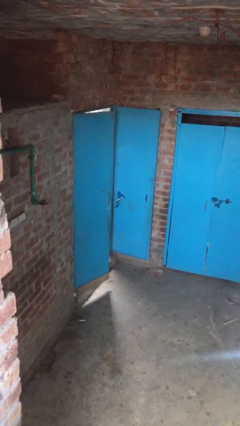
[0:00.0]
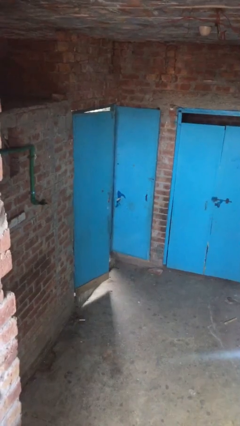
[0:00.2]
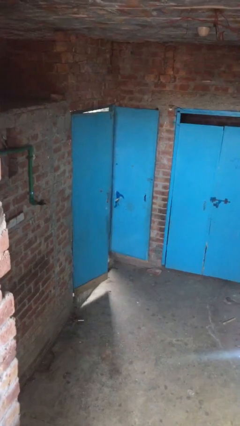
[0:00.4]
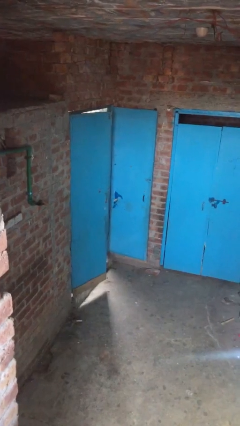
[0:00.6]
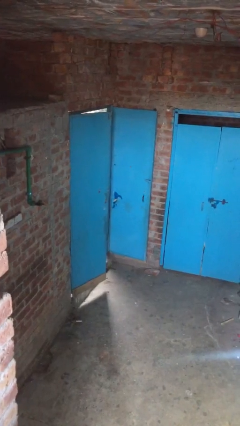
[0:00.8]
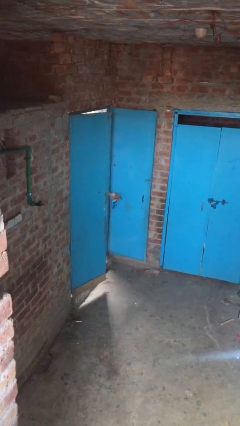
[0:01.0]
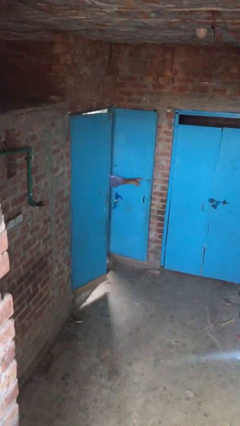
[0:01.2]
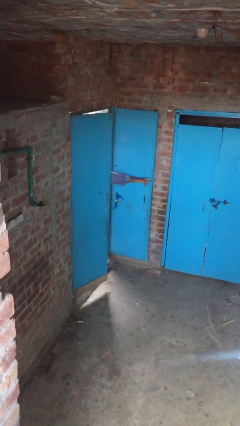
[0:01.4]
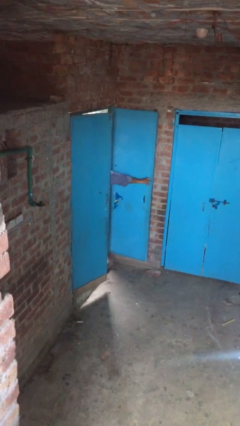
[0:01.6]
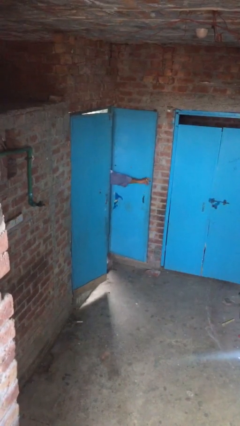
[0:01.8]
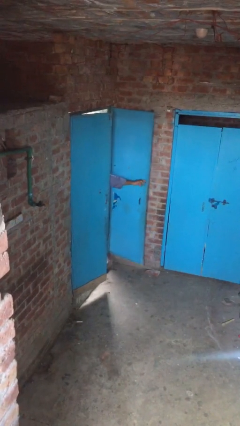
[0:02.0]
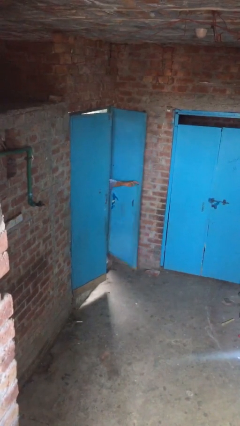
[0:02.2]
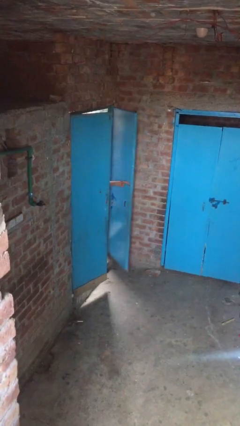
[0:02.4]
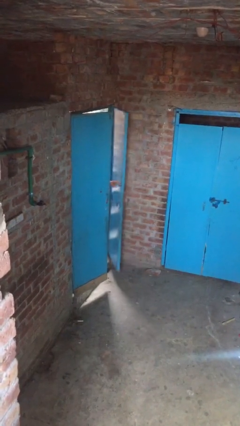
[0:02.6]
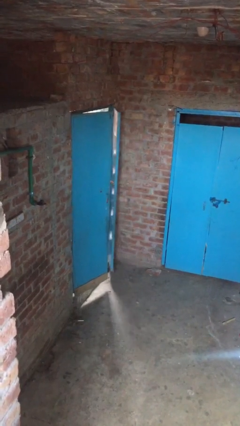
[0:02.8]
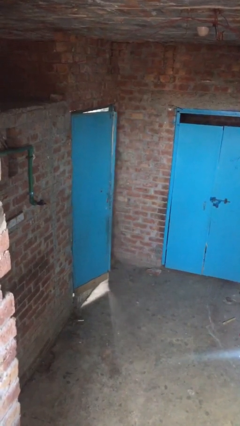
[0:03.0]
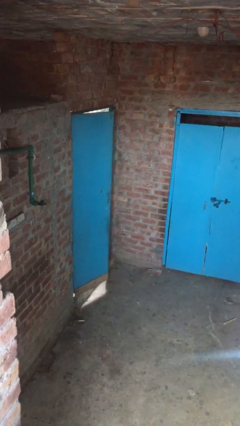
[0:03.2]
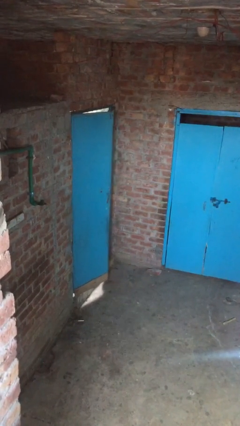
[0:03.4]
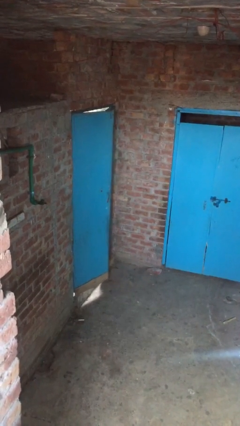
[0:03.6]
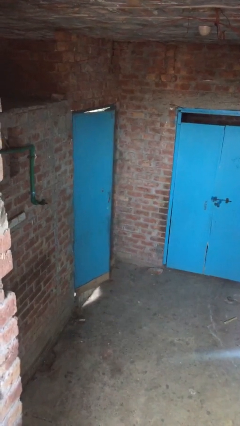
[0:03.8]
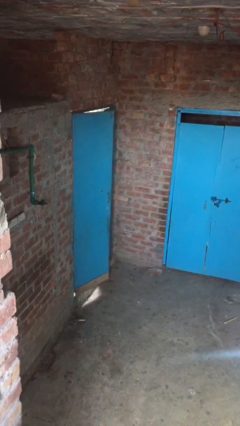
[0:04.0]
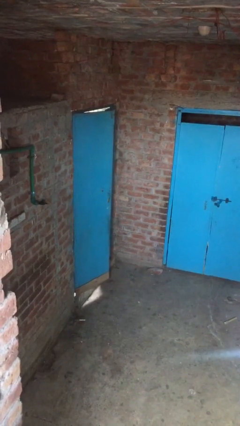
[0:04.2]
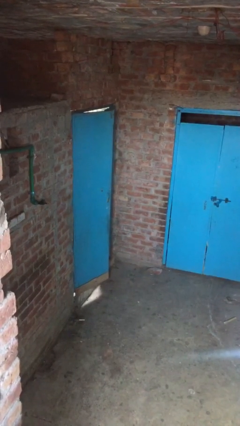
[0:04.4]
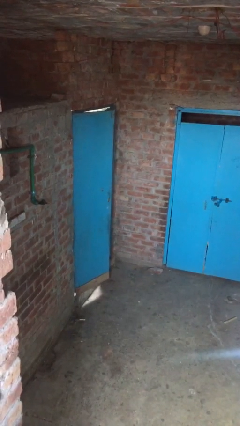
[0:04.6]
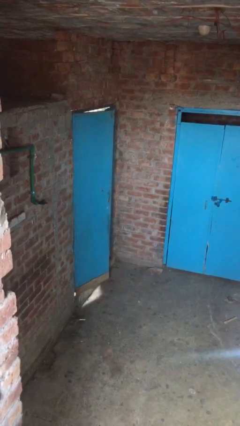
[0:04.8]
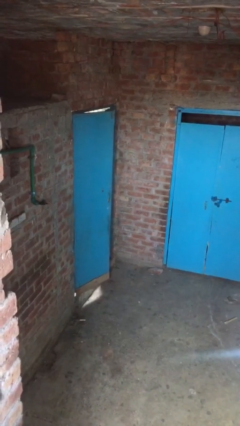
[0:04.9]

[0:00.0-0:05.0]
person closes facility door

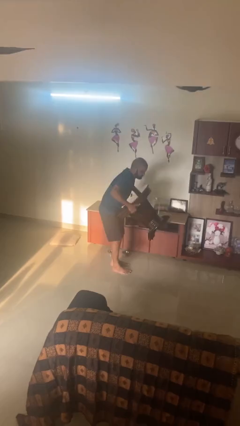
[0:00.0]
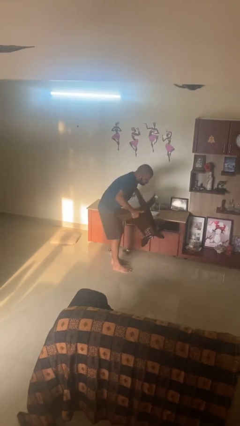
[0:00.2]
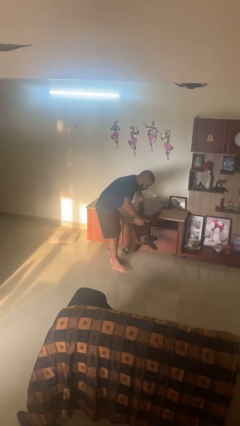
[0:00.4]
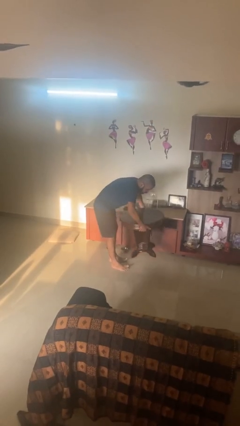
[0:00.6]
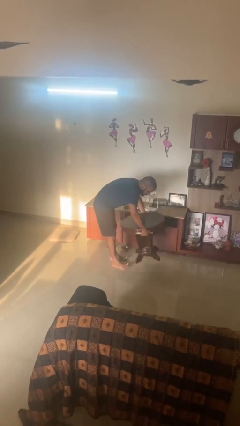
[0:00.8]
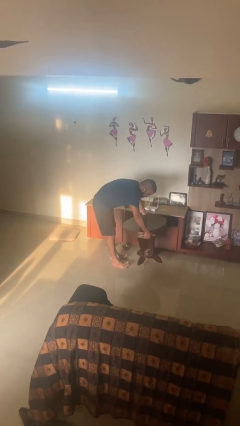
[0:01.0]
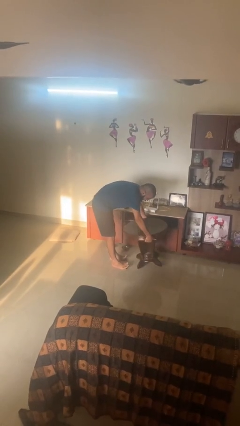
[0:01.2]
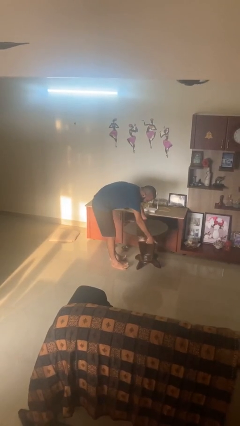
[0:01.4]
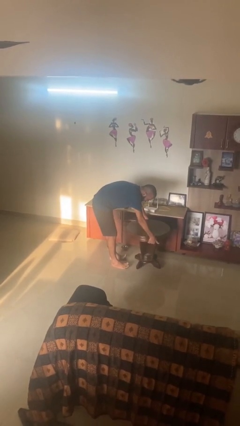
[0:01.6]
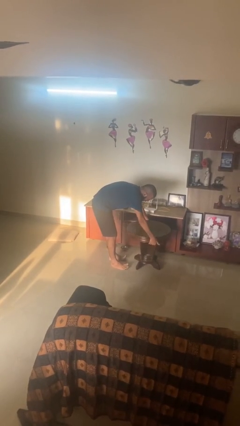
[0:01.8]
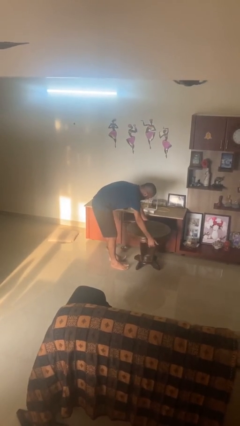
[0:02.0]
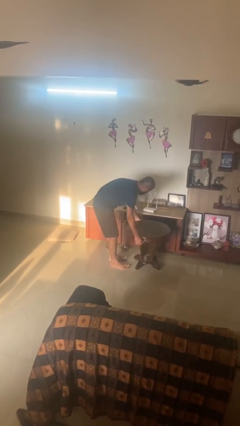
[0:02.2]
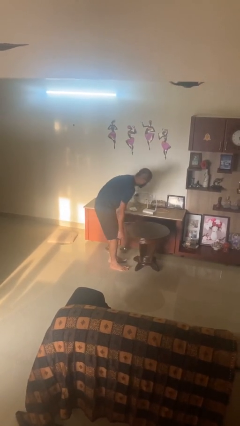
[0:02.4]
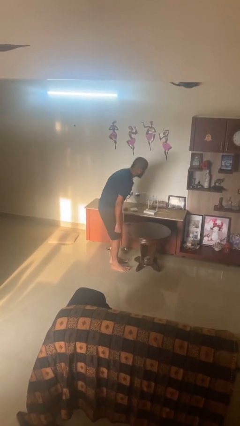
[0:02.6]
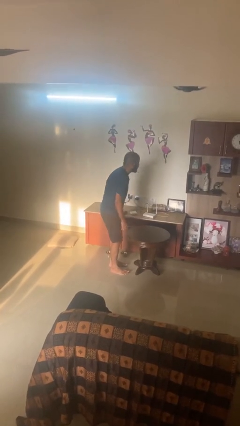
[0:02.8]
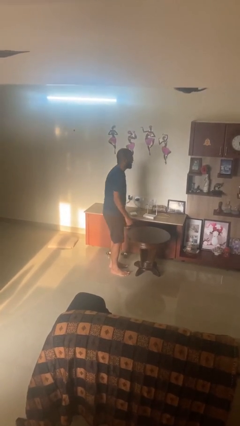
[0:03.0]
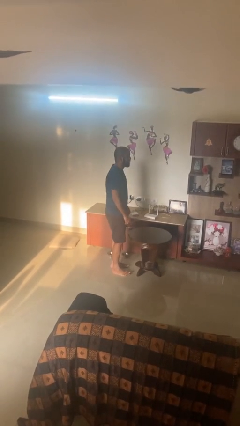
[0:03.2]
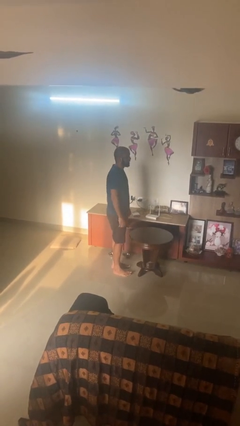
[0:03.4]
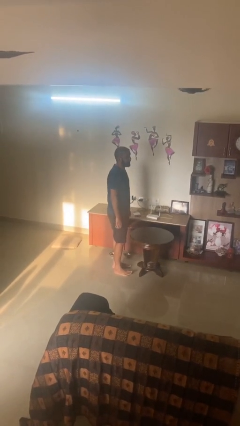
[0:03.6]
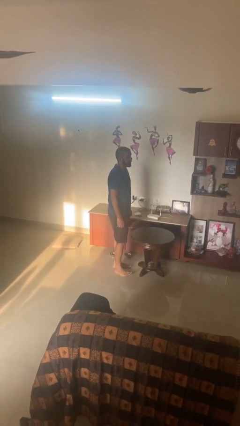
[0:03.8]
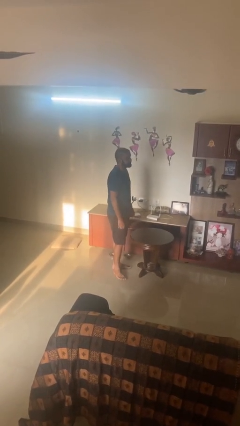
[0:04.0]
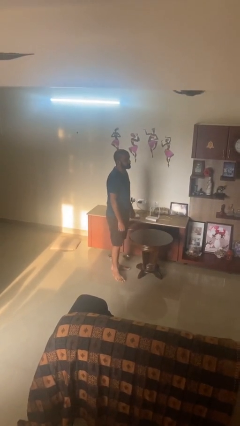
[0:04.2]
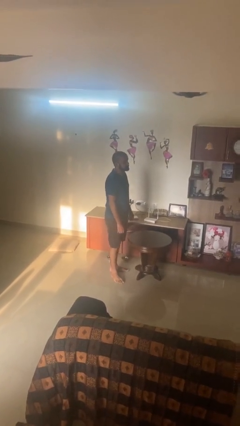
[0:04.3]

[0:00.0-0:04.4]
person puts down object on floor

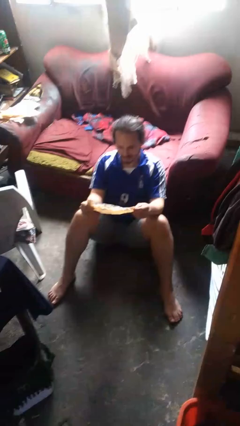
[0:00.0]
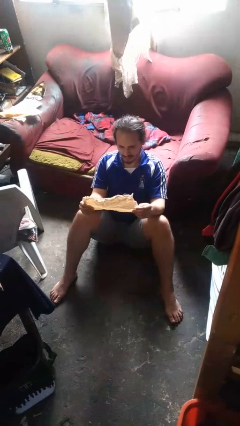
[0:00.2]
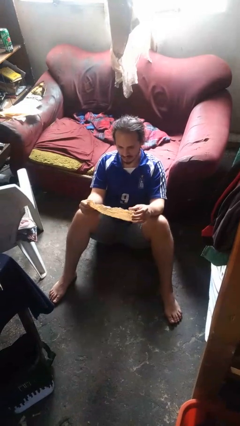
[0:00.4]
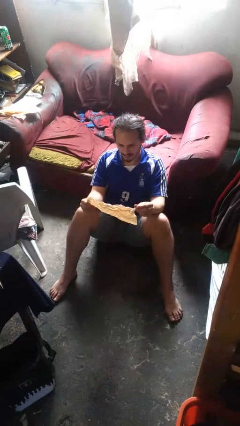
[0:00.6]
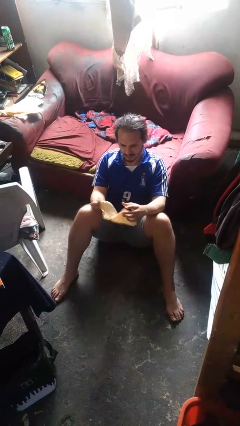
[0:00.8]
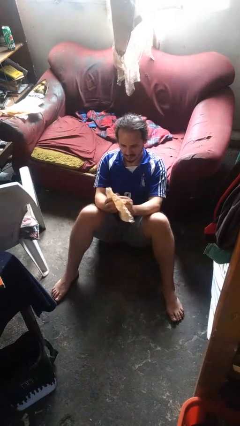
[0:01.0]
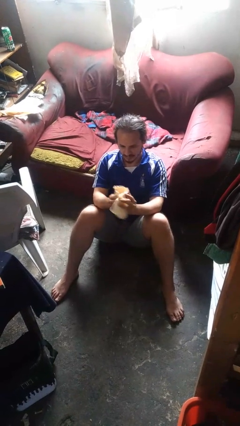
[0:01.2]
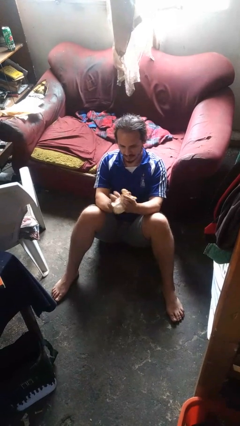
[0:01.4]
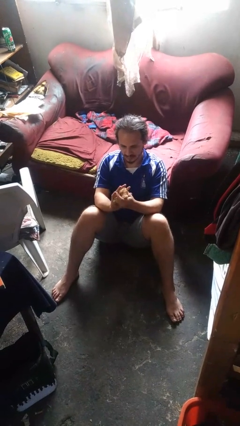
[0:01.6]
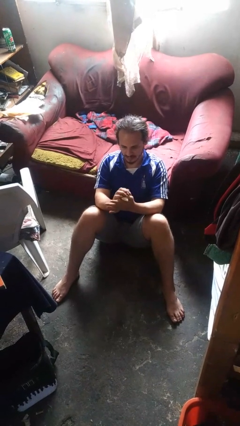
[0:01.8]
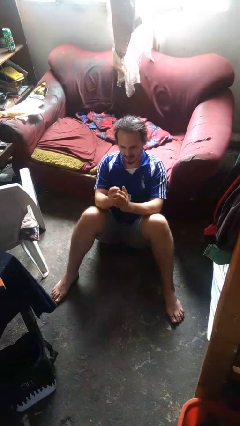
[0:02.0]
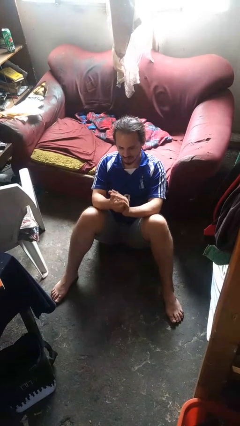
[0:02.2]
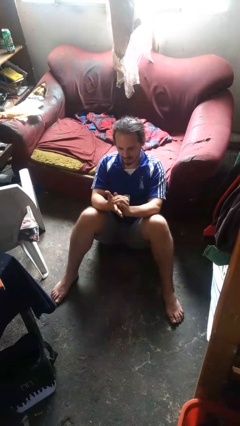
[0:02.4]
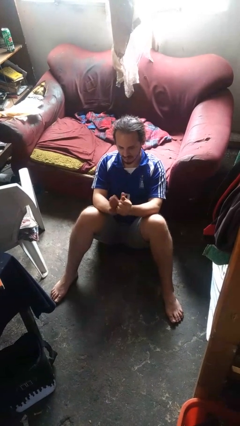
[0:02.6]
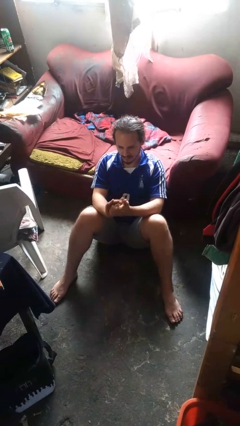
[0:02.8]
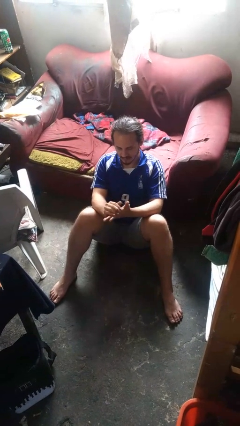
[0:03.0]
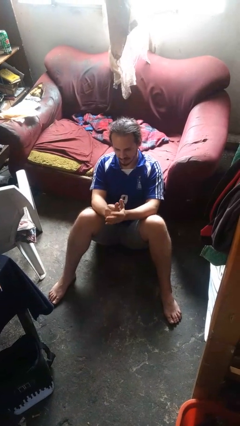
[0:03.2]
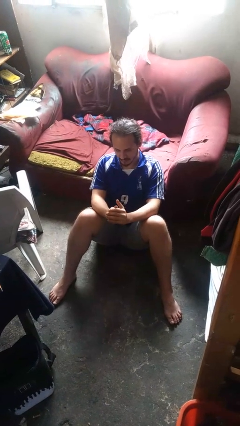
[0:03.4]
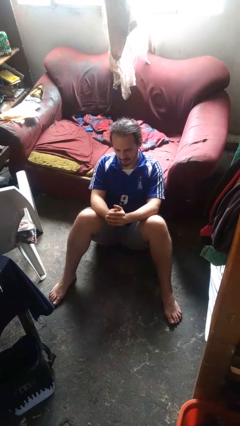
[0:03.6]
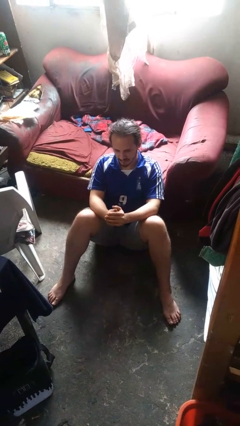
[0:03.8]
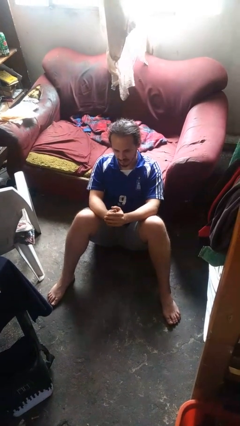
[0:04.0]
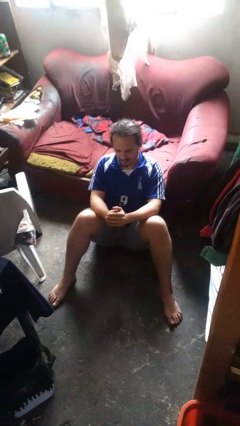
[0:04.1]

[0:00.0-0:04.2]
person crumples paper

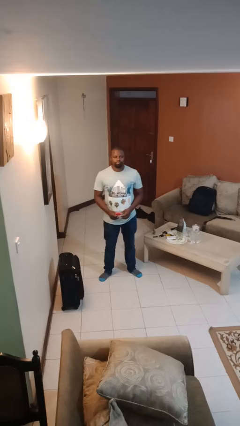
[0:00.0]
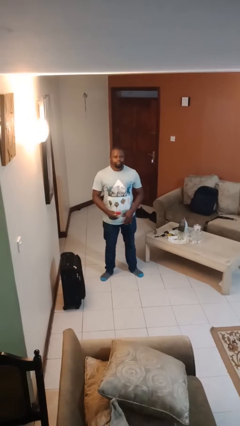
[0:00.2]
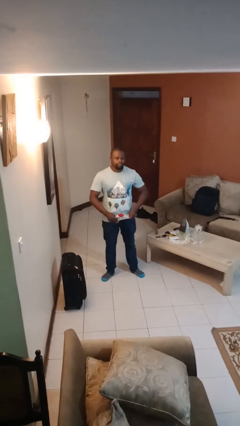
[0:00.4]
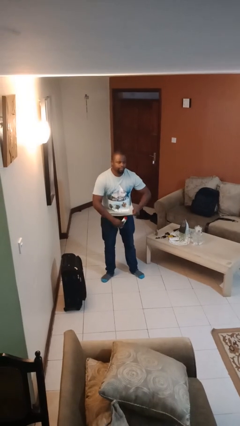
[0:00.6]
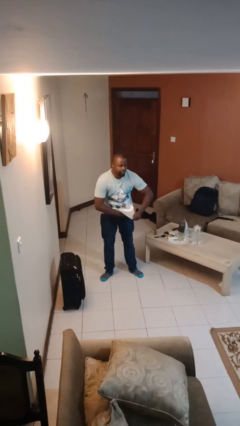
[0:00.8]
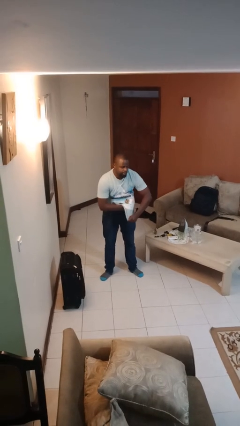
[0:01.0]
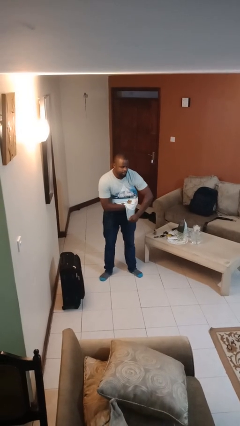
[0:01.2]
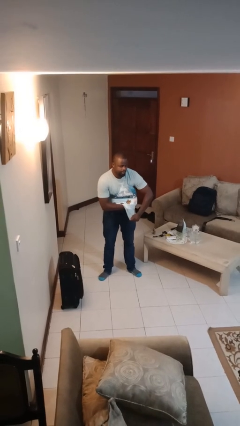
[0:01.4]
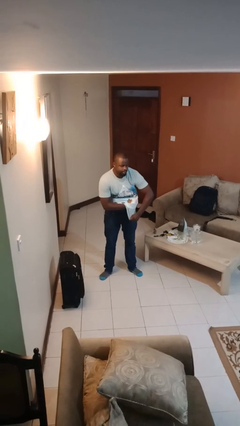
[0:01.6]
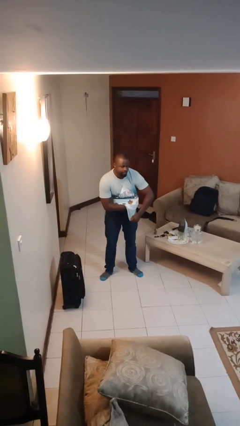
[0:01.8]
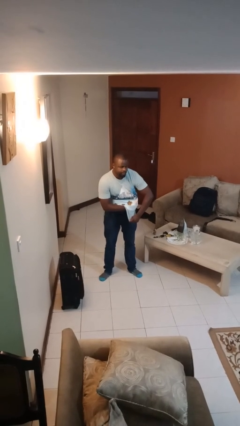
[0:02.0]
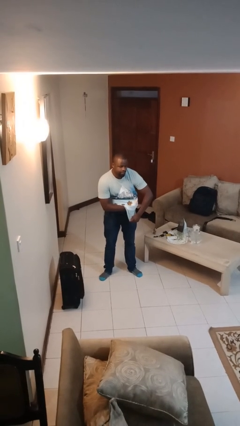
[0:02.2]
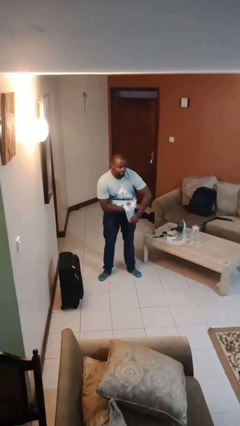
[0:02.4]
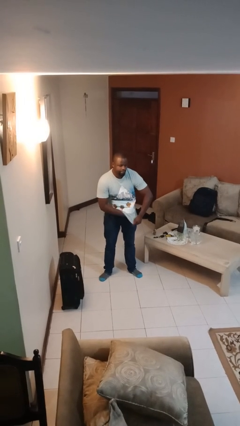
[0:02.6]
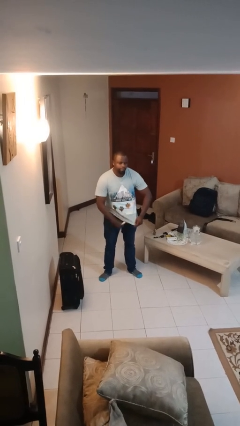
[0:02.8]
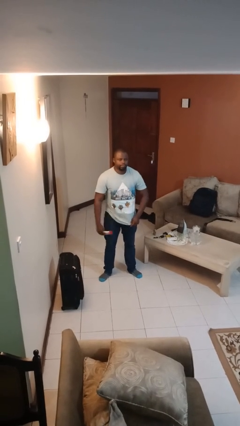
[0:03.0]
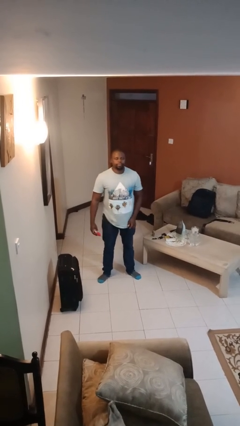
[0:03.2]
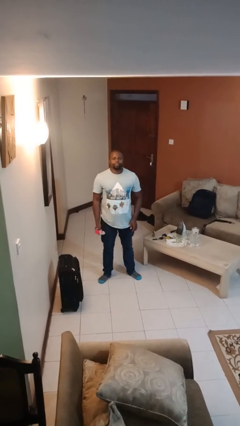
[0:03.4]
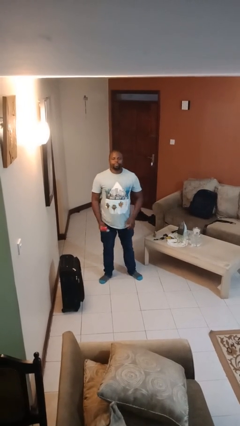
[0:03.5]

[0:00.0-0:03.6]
person applies deodorant

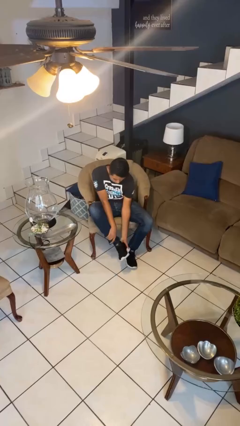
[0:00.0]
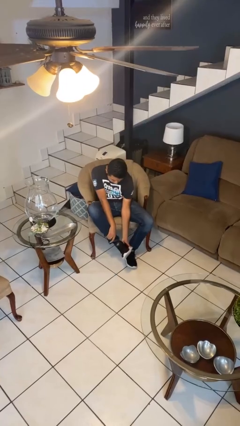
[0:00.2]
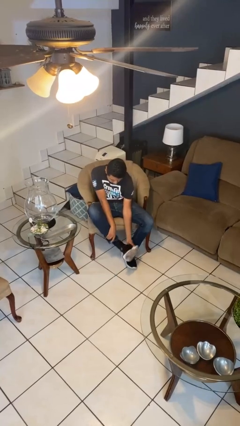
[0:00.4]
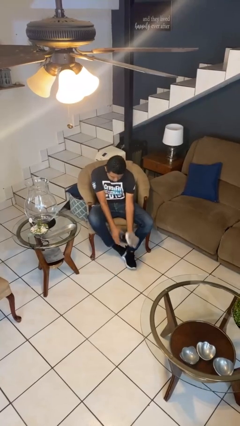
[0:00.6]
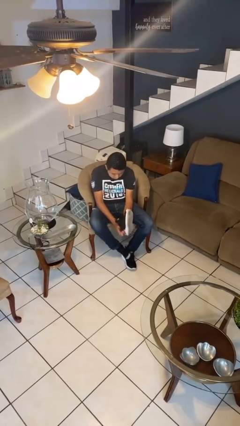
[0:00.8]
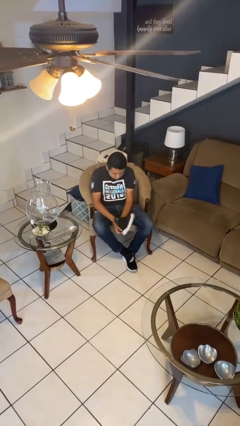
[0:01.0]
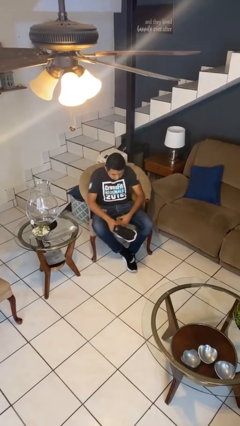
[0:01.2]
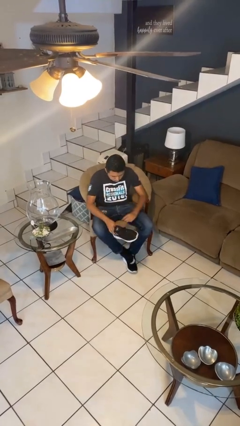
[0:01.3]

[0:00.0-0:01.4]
person takes off headphones
